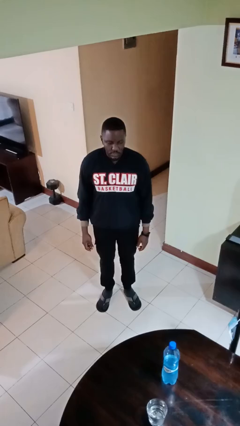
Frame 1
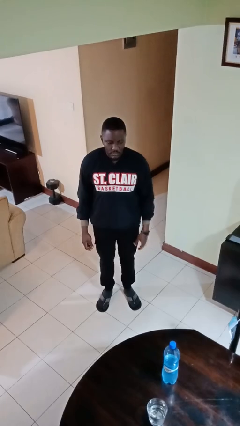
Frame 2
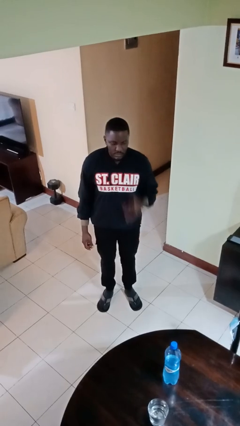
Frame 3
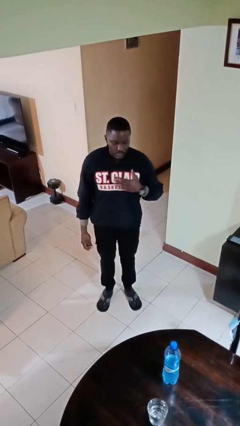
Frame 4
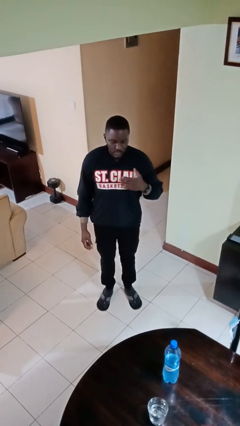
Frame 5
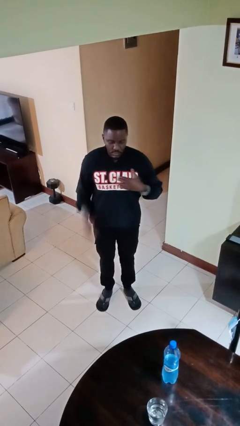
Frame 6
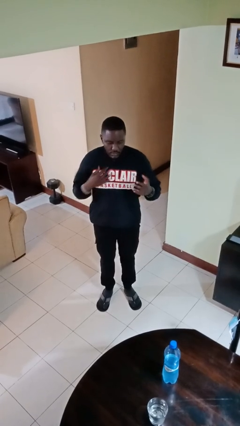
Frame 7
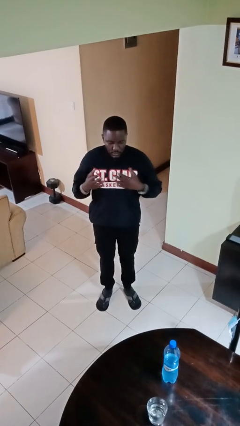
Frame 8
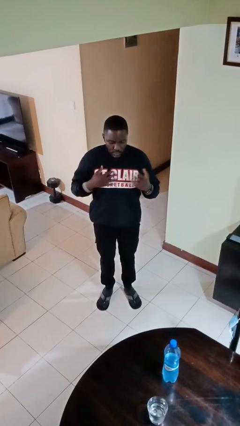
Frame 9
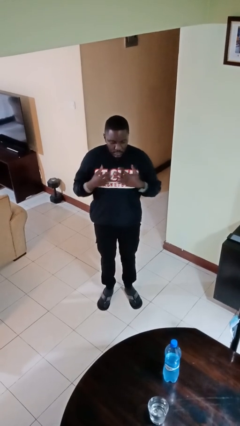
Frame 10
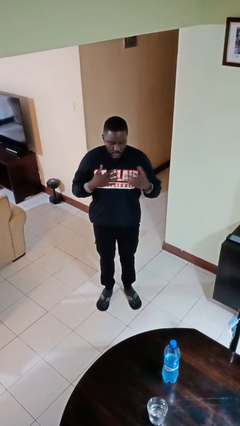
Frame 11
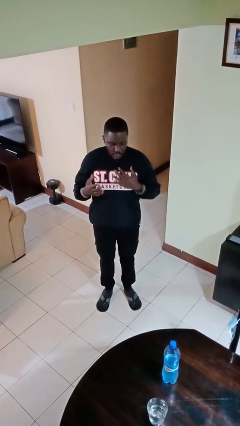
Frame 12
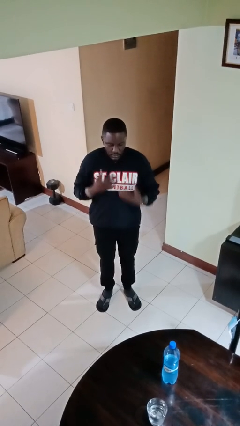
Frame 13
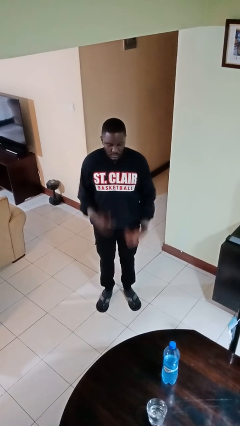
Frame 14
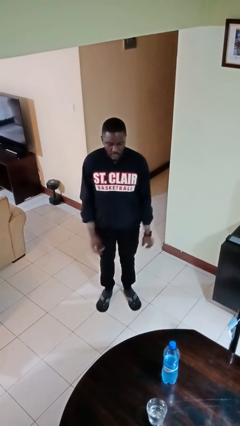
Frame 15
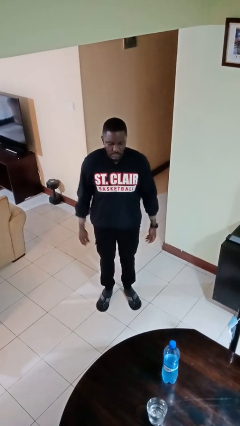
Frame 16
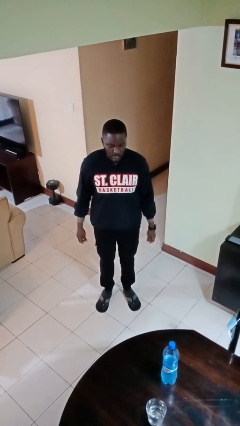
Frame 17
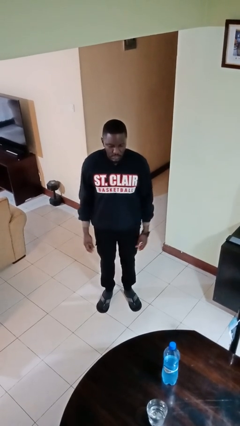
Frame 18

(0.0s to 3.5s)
person drums on chest

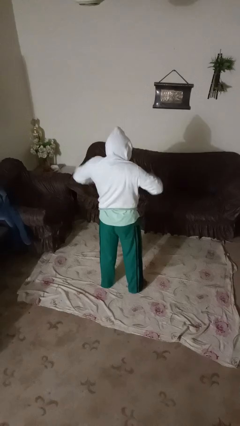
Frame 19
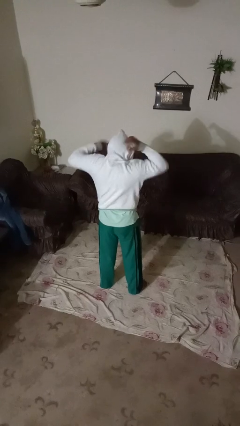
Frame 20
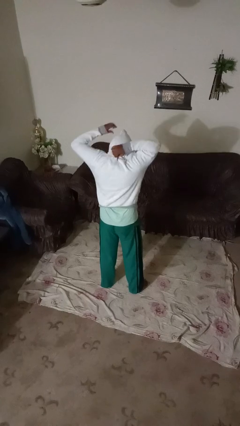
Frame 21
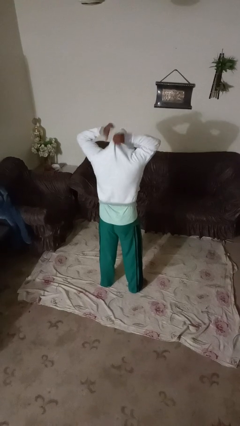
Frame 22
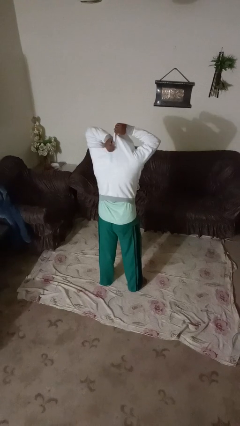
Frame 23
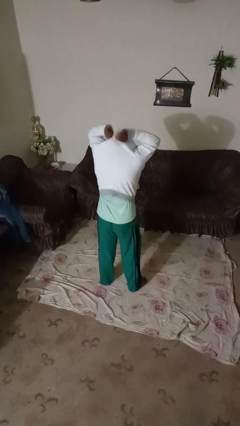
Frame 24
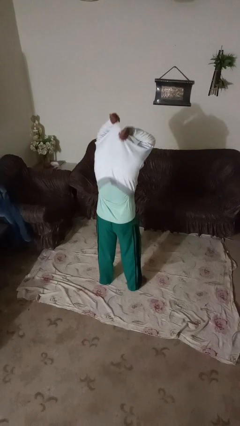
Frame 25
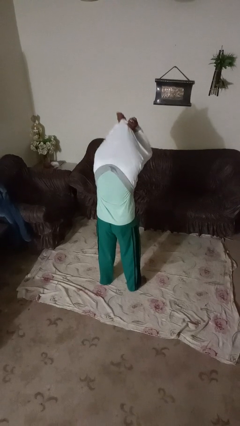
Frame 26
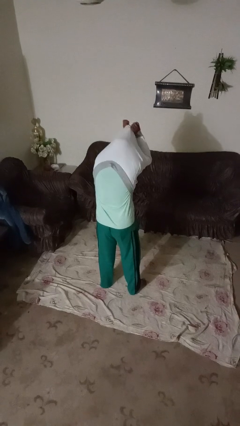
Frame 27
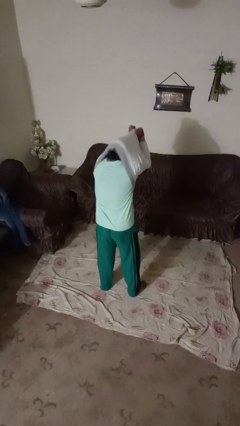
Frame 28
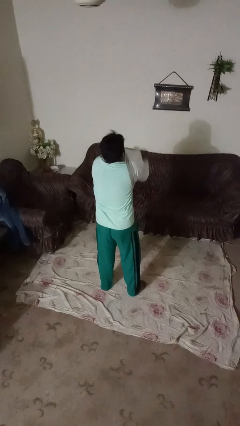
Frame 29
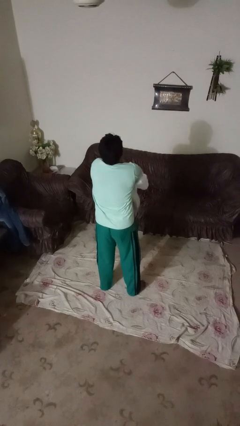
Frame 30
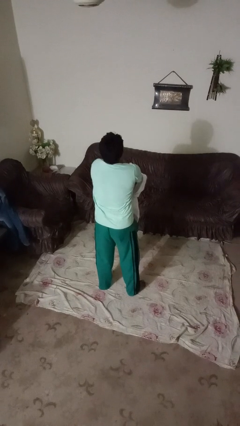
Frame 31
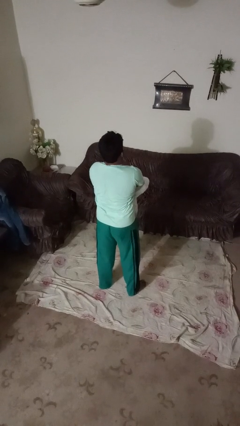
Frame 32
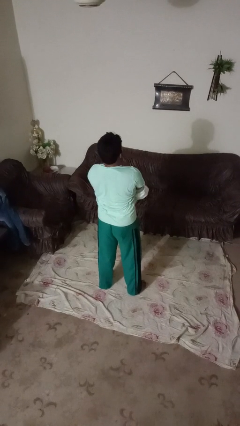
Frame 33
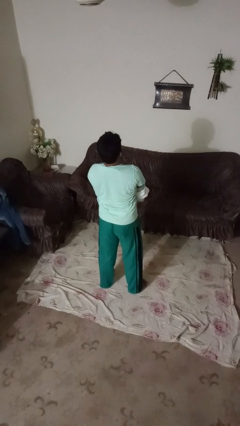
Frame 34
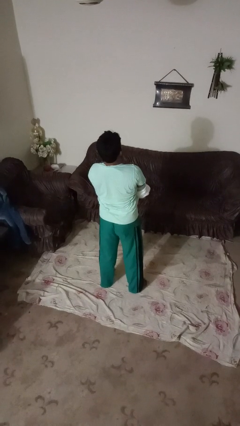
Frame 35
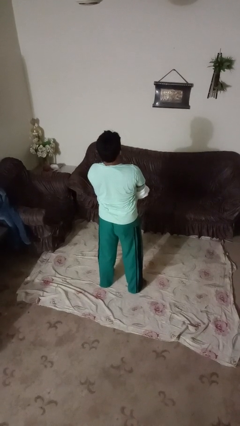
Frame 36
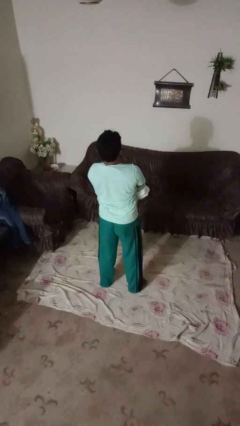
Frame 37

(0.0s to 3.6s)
person takes off hoodie

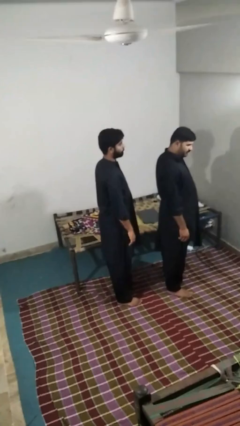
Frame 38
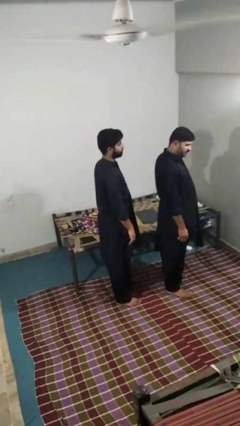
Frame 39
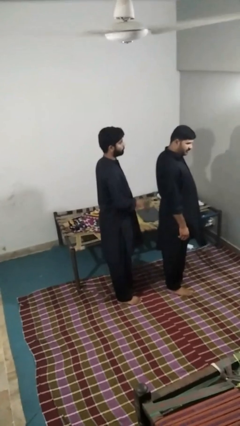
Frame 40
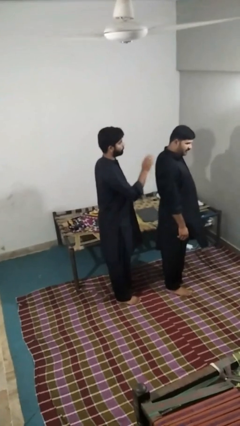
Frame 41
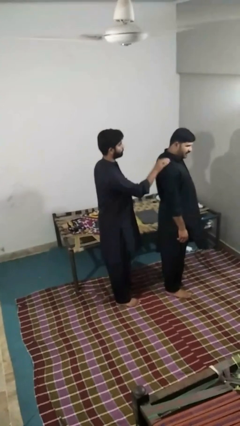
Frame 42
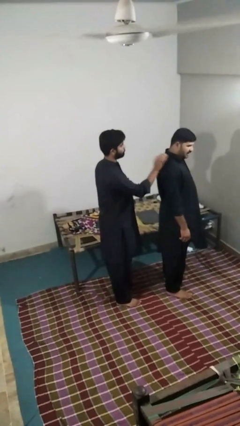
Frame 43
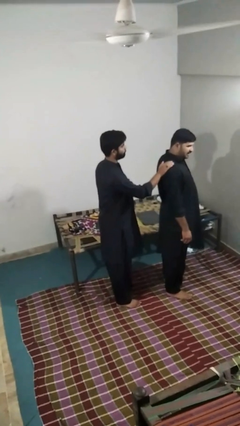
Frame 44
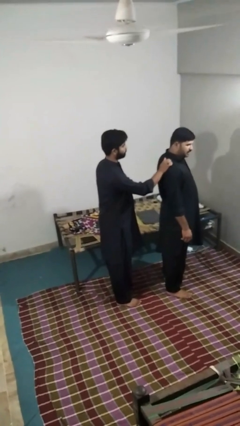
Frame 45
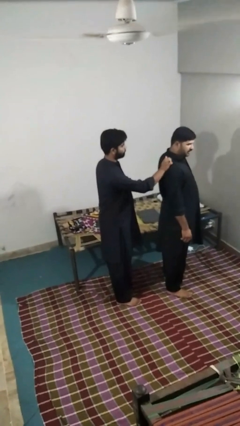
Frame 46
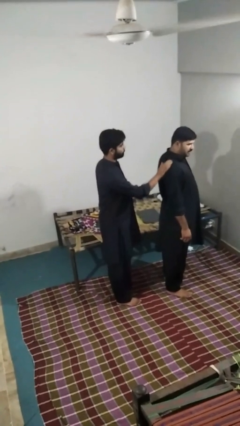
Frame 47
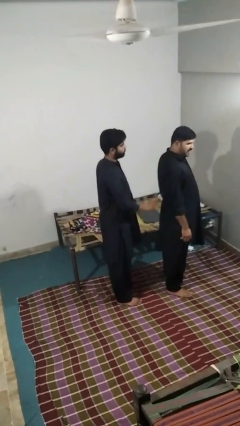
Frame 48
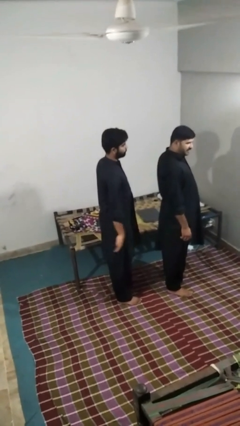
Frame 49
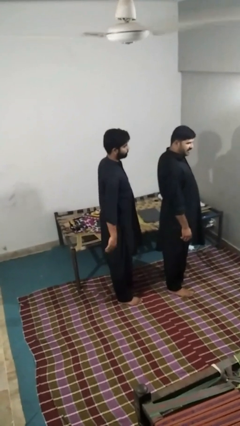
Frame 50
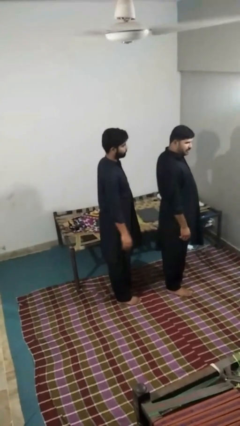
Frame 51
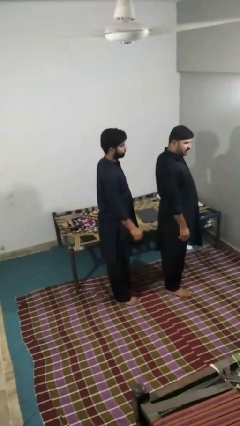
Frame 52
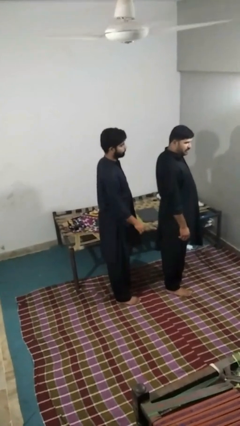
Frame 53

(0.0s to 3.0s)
person touches back of person

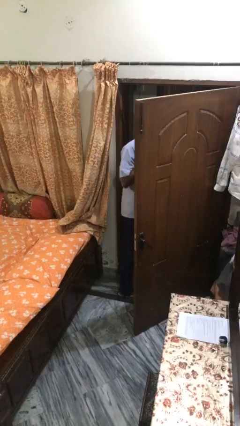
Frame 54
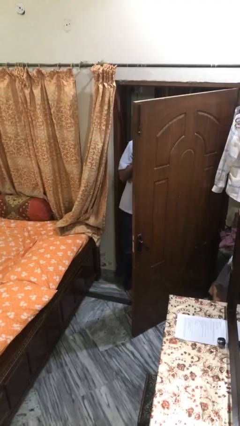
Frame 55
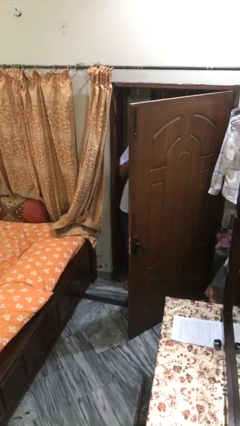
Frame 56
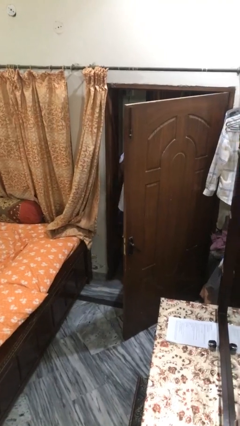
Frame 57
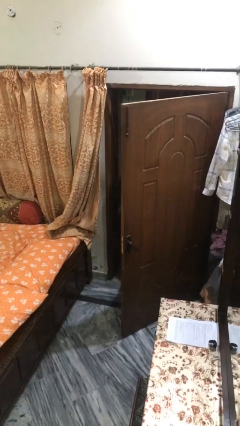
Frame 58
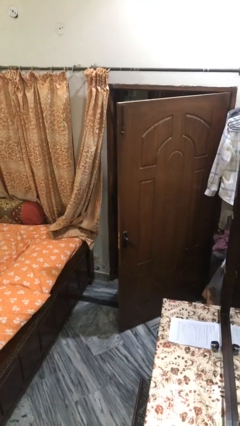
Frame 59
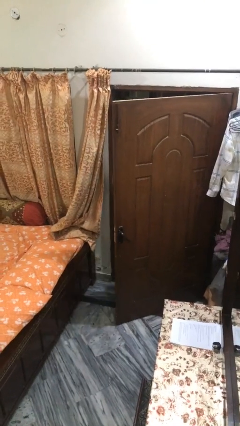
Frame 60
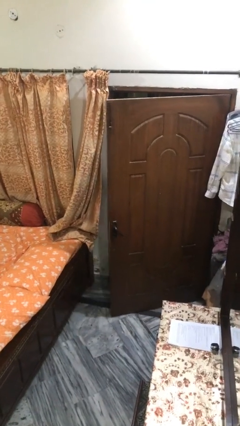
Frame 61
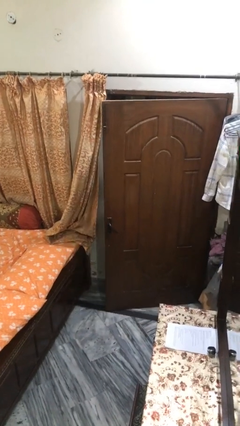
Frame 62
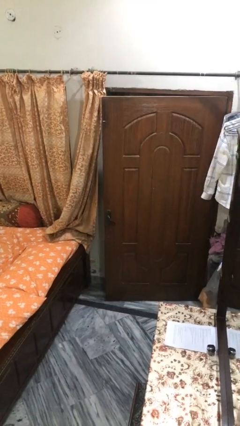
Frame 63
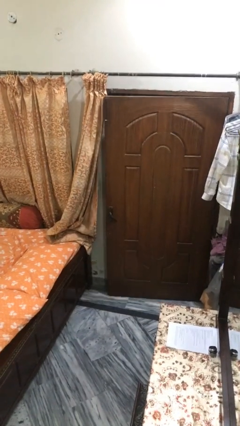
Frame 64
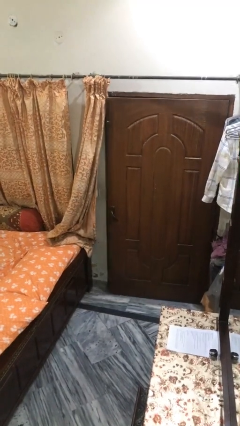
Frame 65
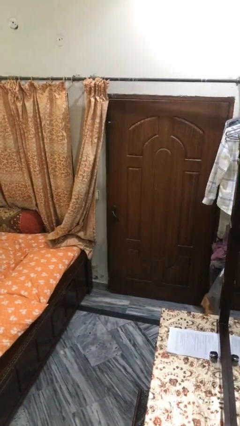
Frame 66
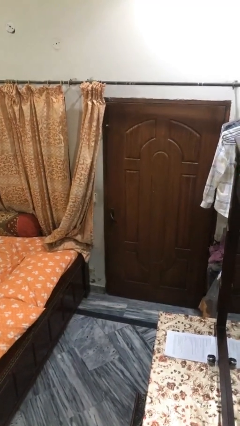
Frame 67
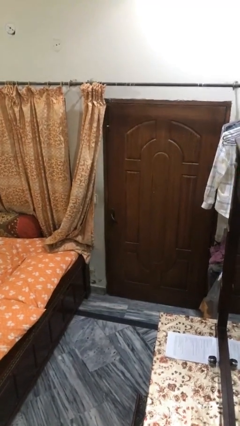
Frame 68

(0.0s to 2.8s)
person closes facility door

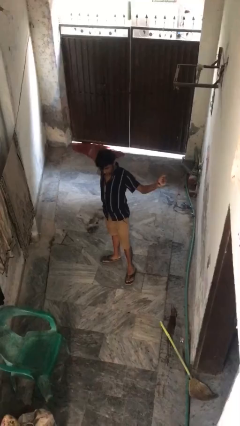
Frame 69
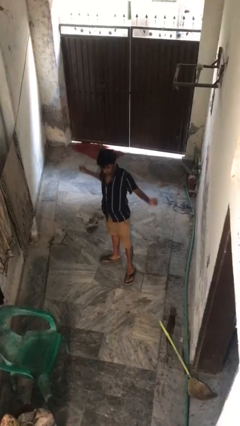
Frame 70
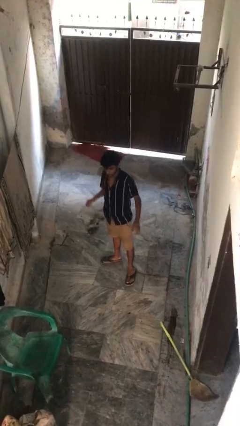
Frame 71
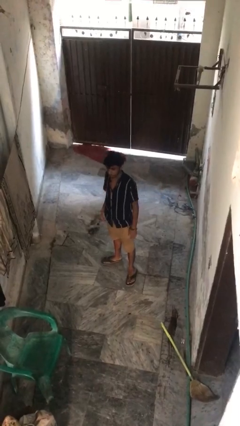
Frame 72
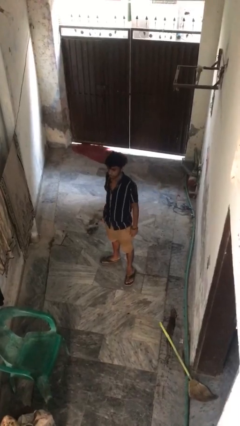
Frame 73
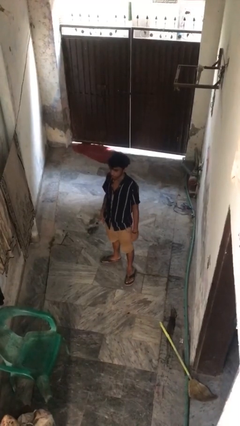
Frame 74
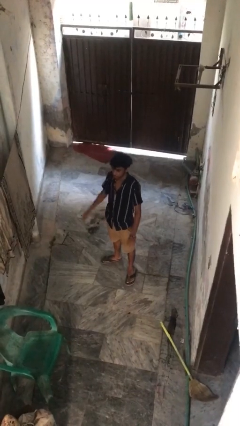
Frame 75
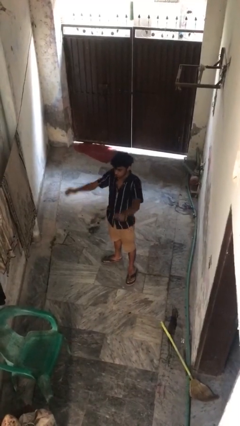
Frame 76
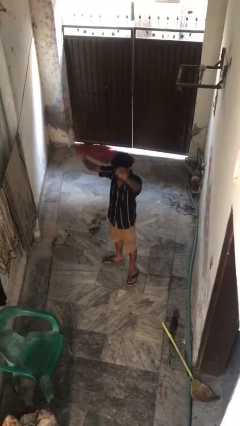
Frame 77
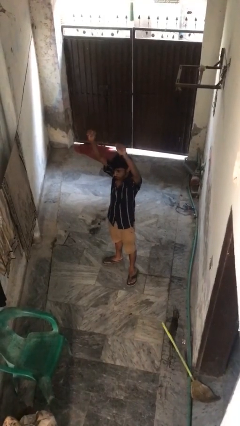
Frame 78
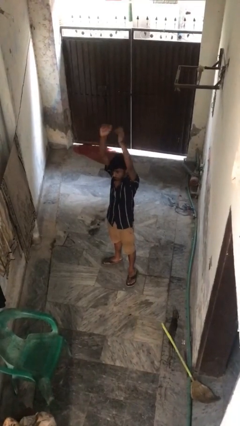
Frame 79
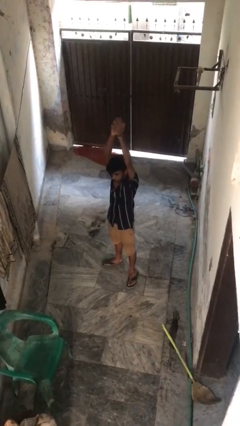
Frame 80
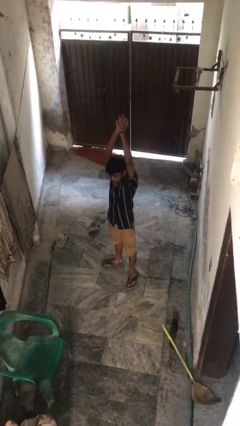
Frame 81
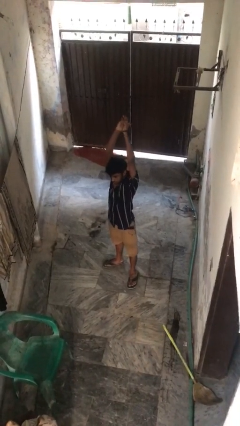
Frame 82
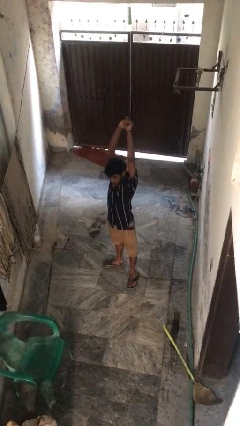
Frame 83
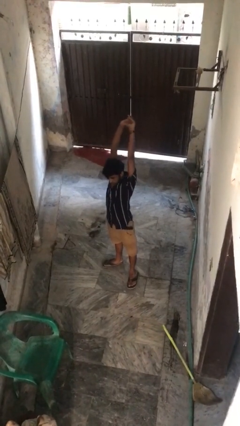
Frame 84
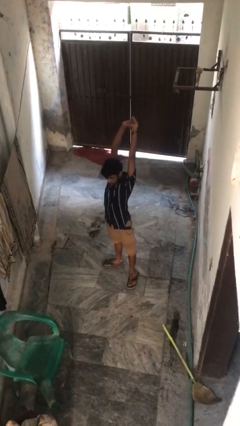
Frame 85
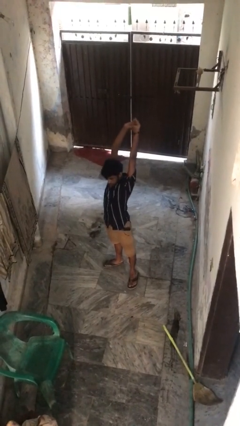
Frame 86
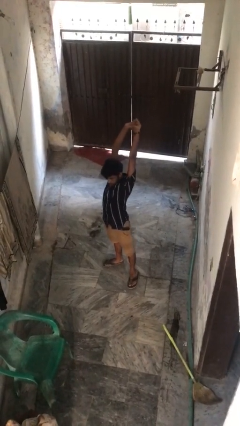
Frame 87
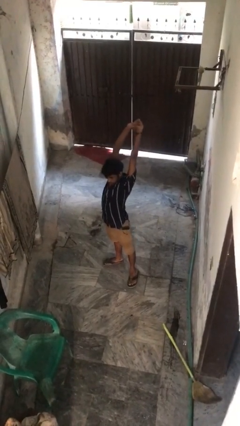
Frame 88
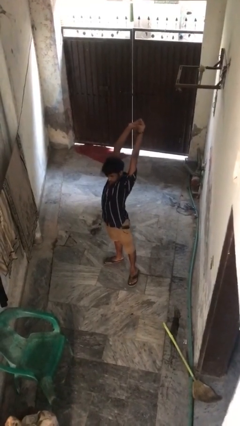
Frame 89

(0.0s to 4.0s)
person stretches arms over head

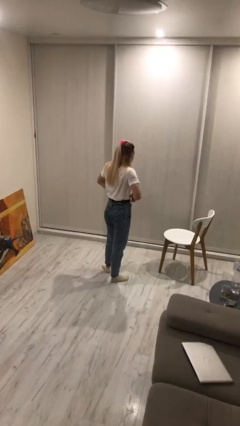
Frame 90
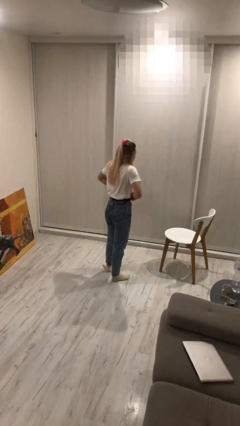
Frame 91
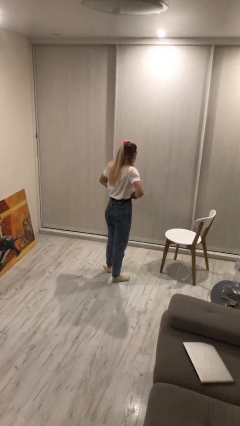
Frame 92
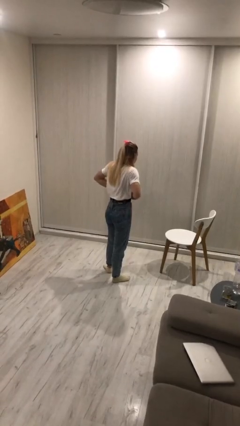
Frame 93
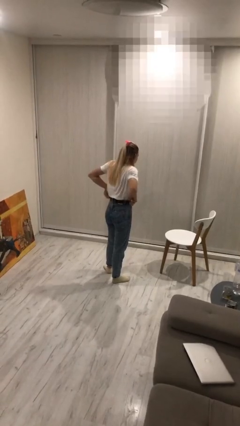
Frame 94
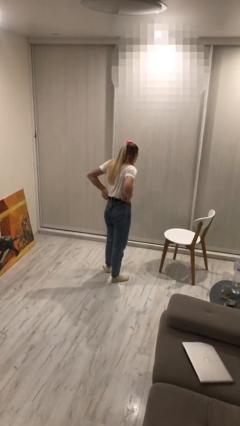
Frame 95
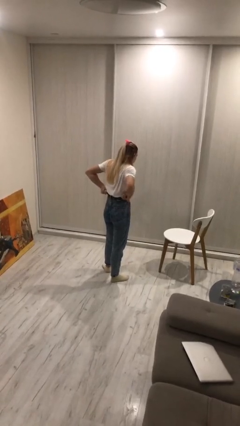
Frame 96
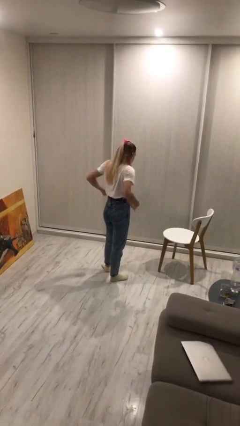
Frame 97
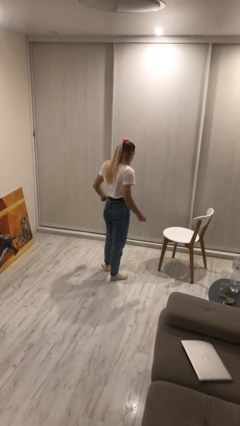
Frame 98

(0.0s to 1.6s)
person hikes up pants
